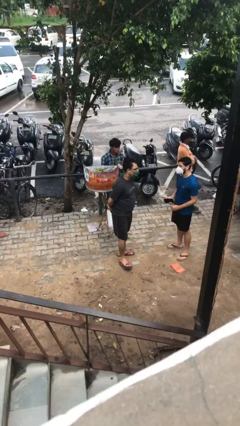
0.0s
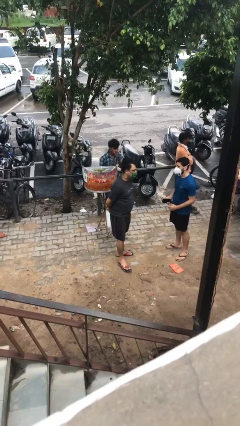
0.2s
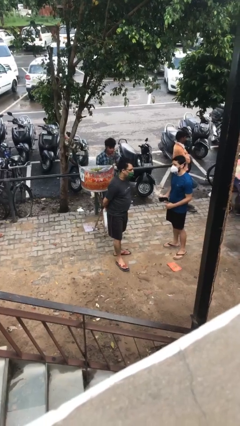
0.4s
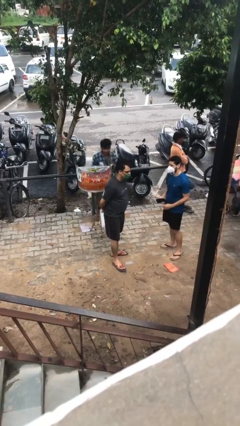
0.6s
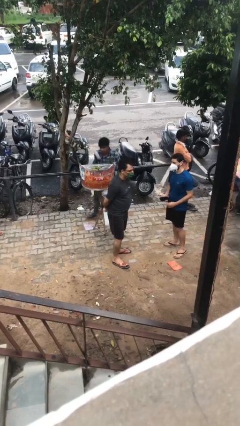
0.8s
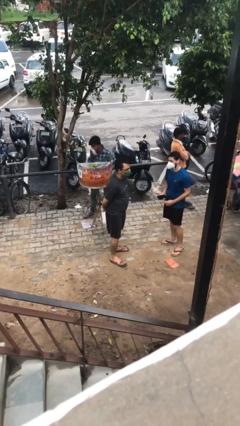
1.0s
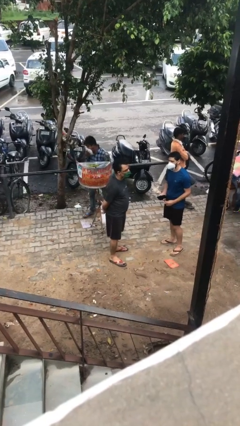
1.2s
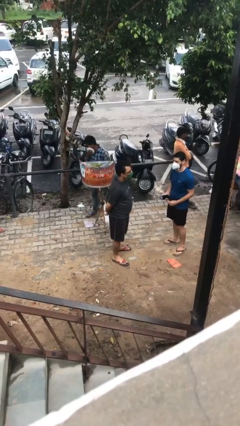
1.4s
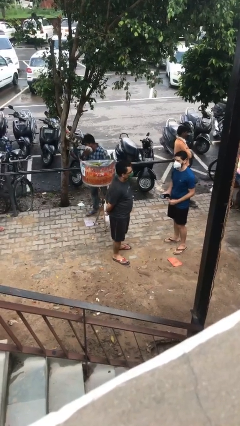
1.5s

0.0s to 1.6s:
person talks to person

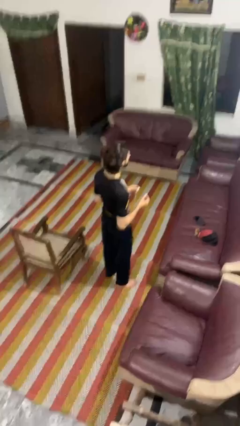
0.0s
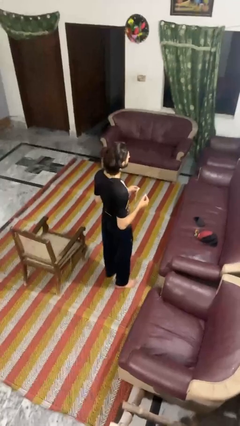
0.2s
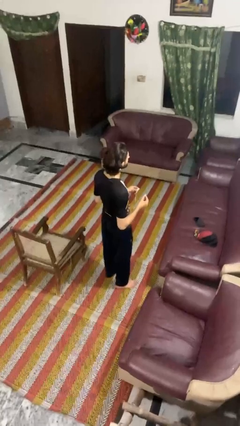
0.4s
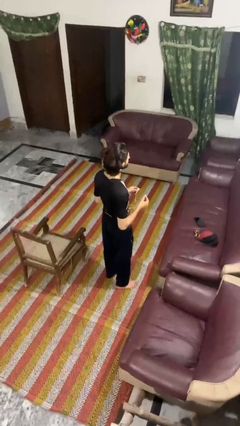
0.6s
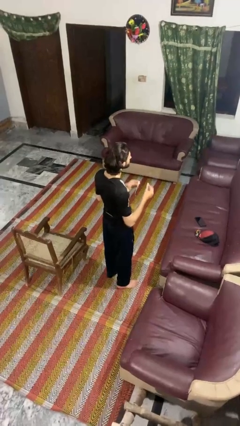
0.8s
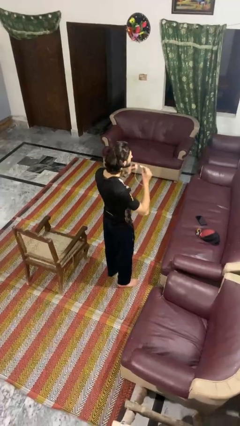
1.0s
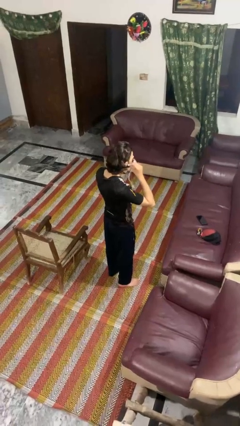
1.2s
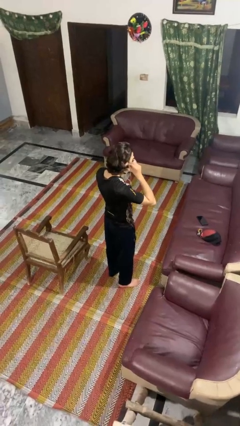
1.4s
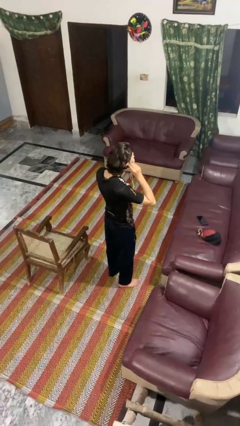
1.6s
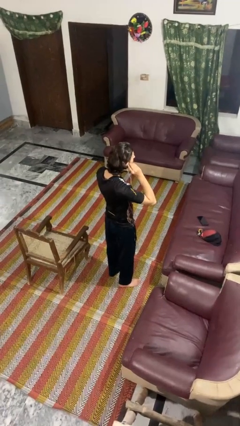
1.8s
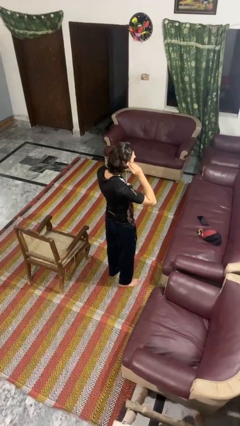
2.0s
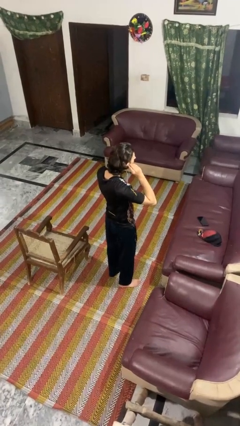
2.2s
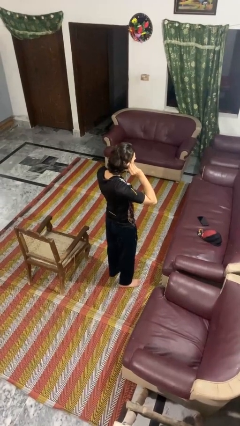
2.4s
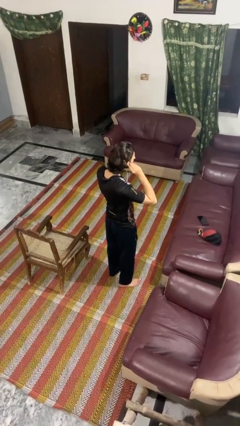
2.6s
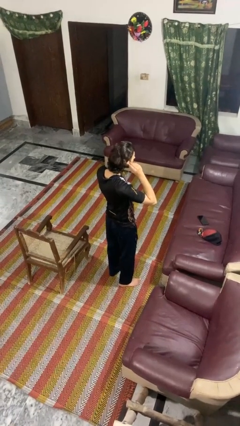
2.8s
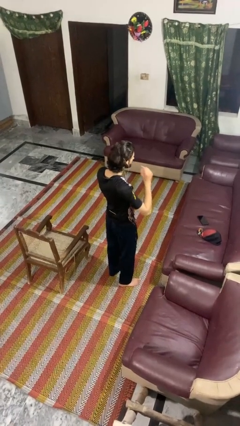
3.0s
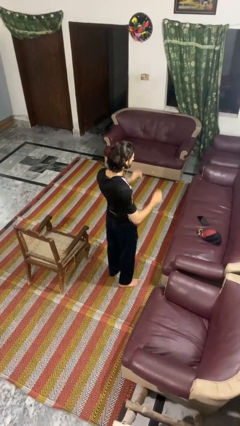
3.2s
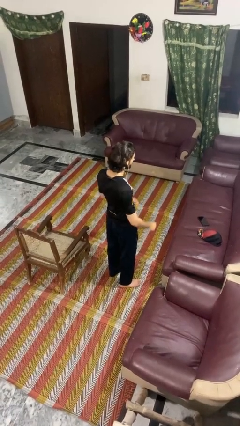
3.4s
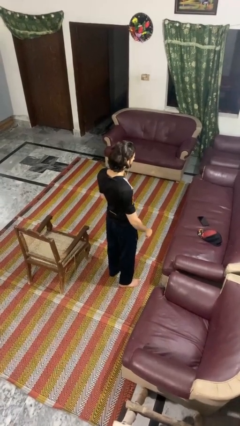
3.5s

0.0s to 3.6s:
person puts on headphones

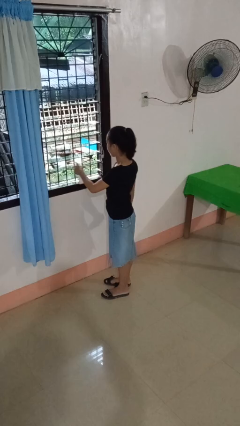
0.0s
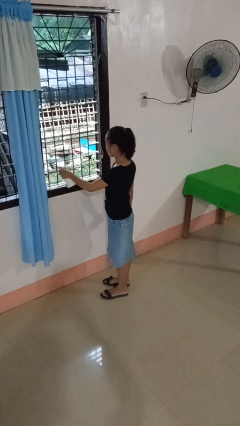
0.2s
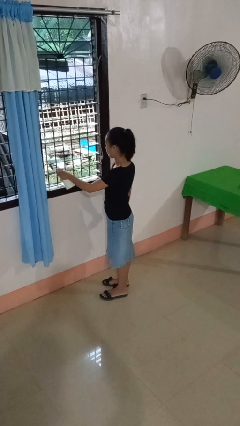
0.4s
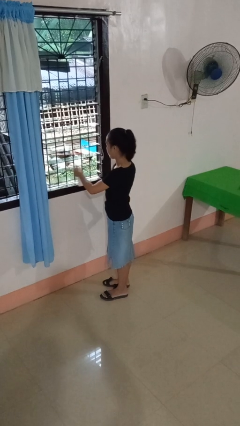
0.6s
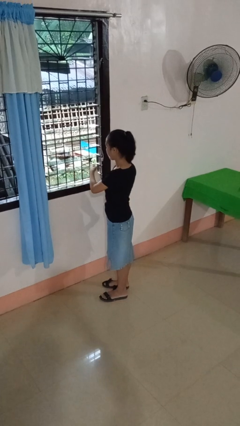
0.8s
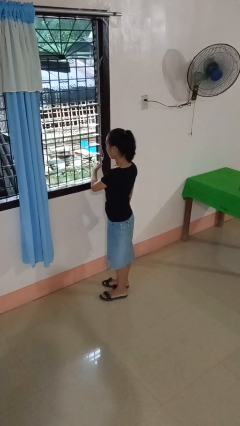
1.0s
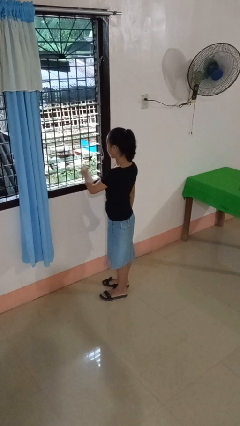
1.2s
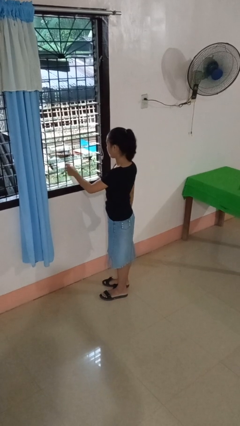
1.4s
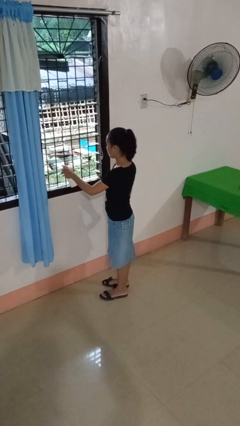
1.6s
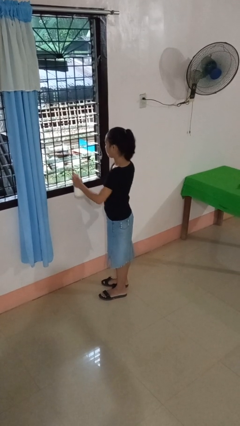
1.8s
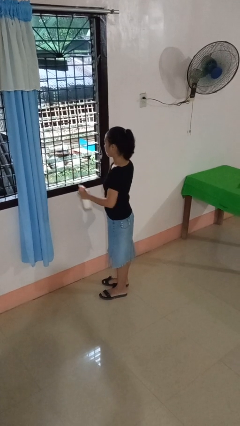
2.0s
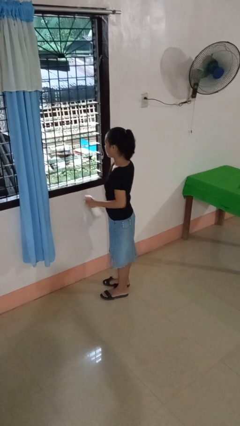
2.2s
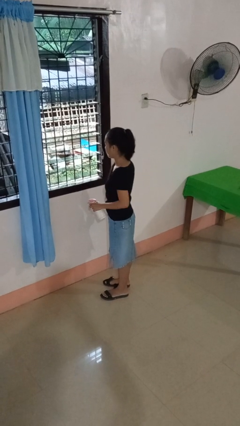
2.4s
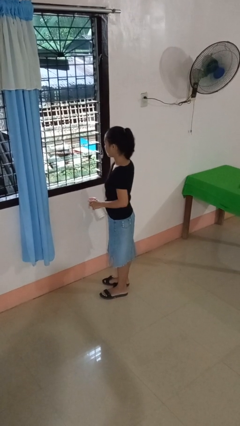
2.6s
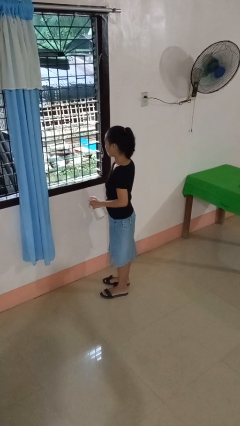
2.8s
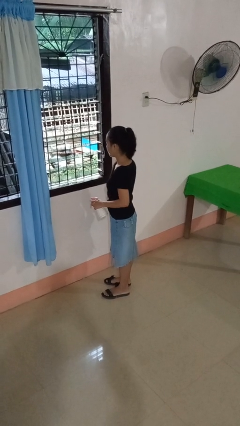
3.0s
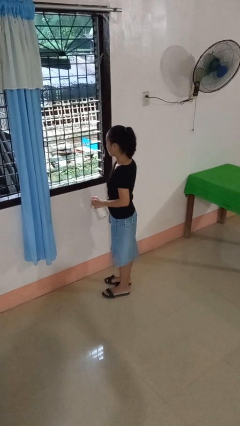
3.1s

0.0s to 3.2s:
person sprays from bottle

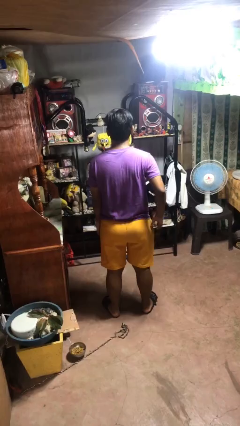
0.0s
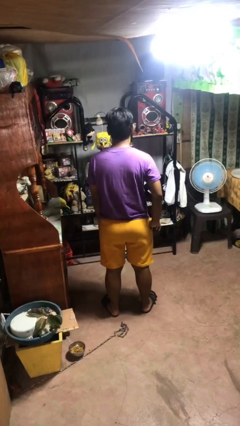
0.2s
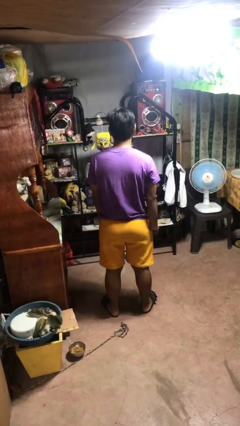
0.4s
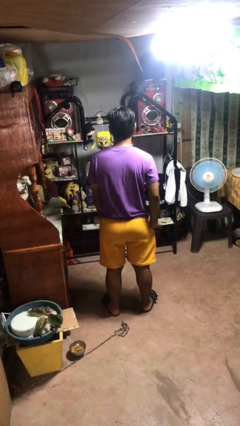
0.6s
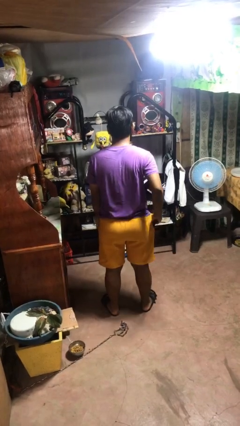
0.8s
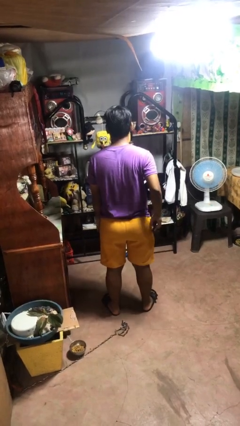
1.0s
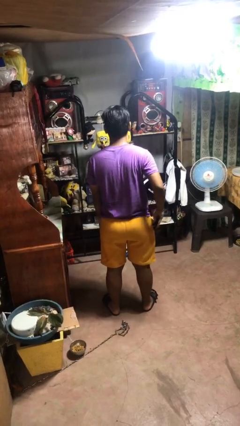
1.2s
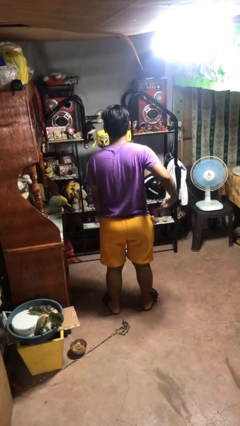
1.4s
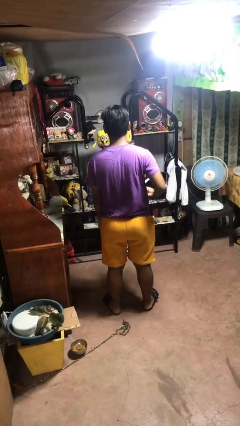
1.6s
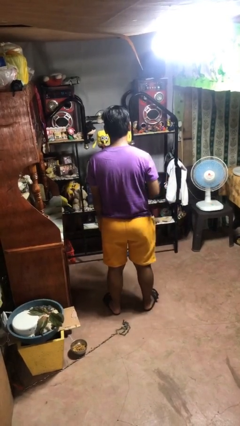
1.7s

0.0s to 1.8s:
person takes phone from pocket

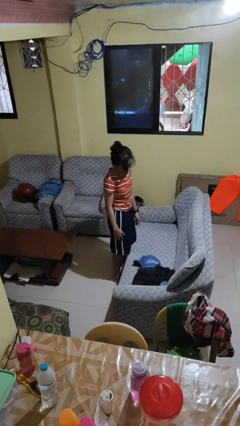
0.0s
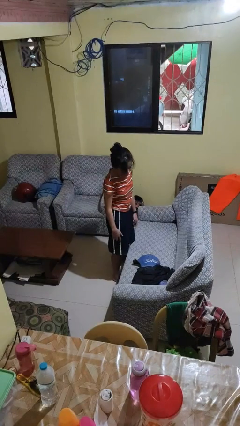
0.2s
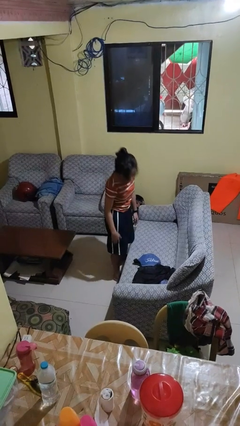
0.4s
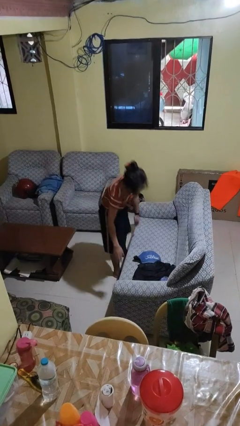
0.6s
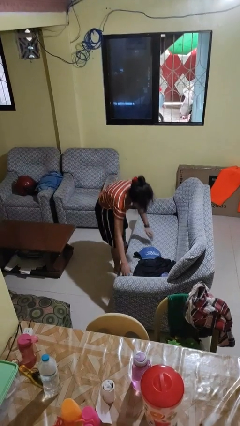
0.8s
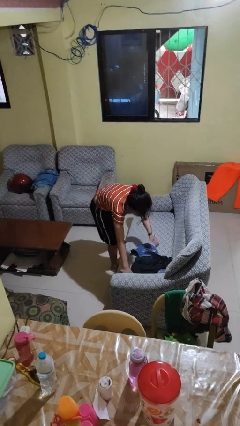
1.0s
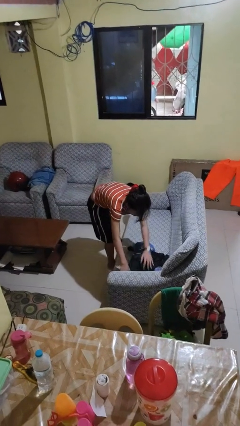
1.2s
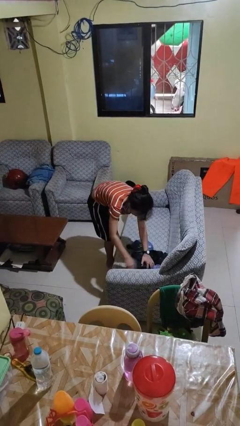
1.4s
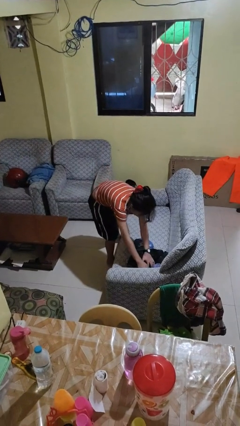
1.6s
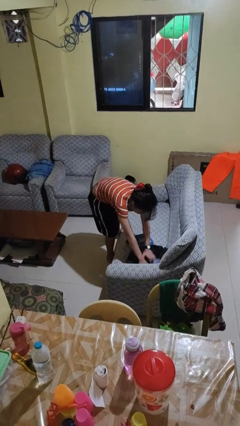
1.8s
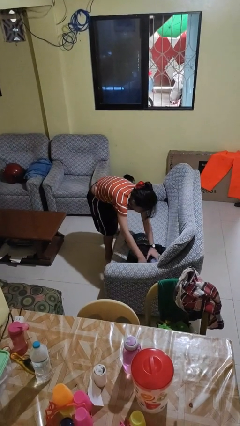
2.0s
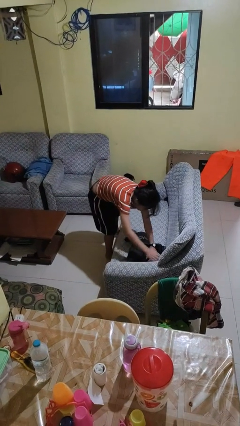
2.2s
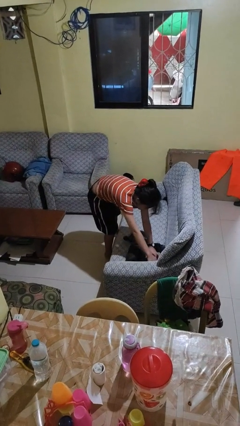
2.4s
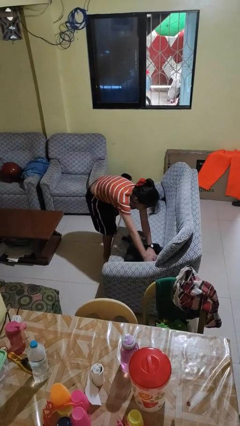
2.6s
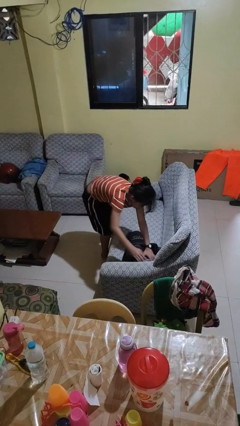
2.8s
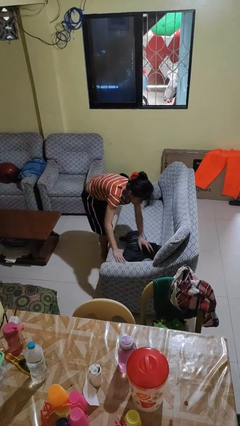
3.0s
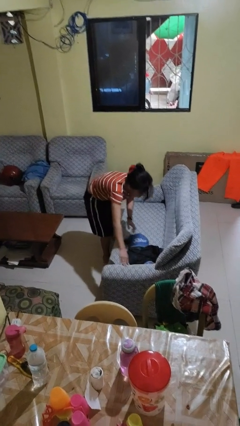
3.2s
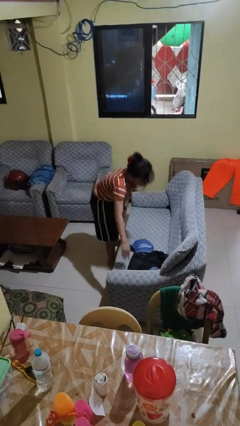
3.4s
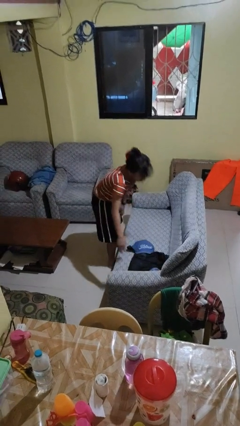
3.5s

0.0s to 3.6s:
person searches in couch

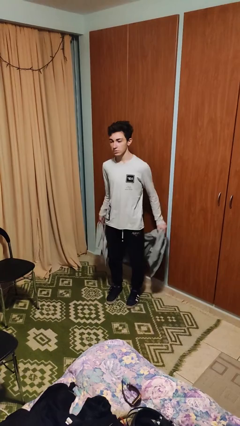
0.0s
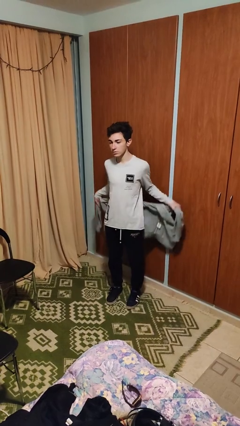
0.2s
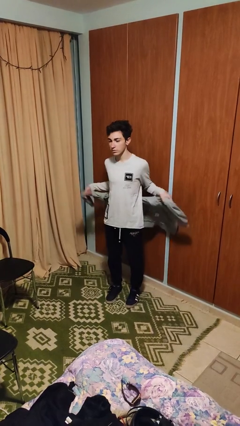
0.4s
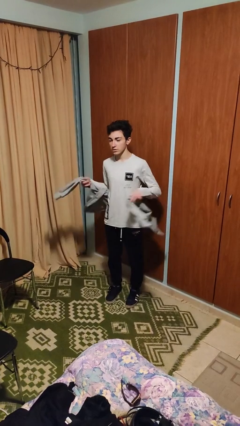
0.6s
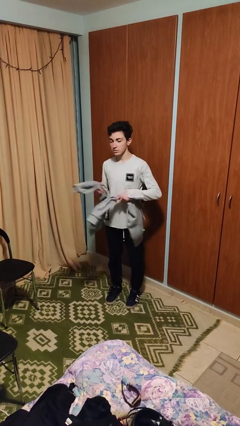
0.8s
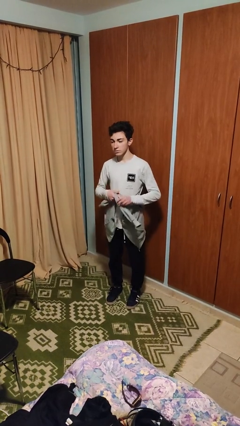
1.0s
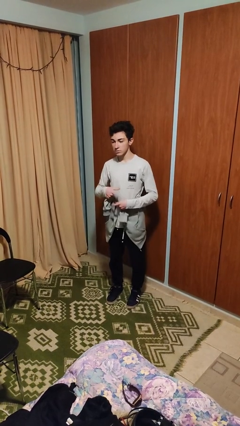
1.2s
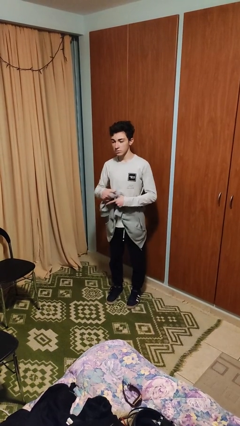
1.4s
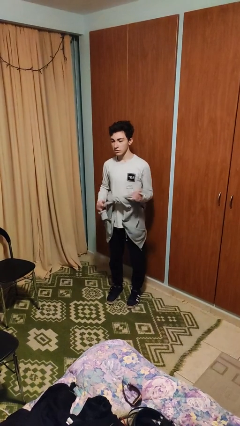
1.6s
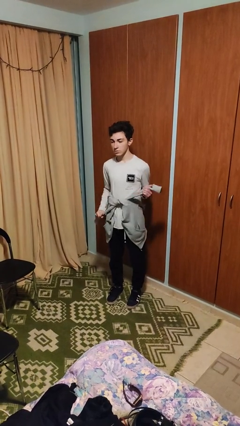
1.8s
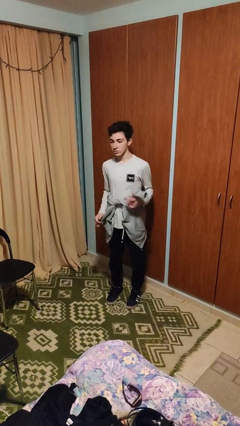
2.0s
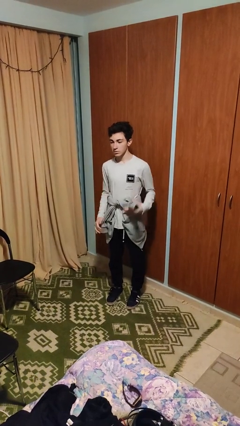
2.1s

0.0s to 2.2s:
person ties jacket around waist

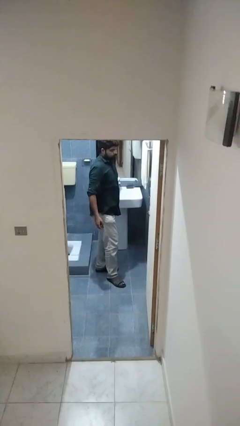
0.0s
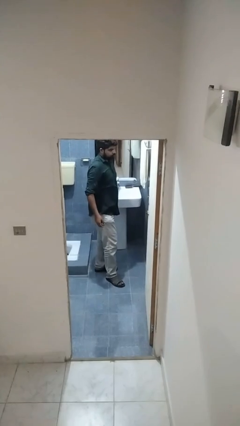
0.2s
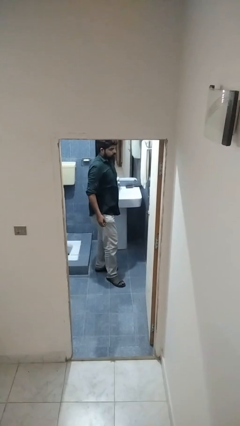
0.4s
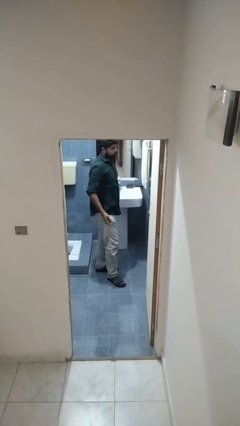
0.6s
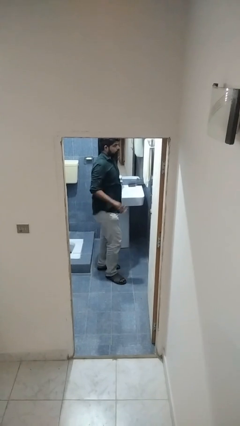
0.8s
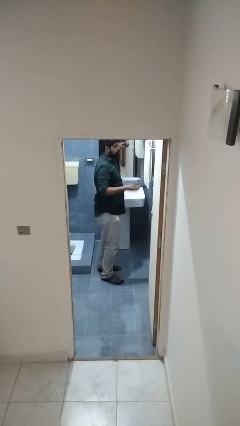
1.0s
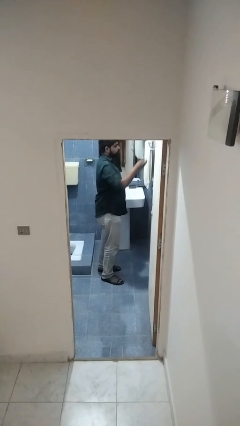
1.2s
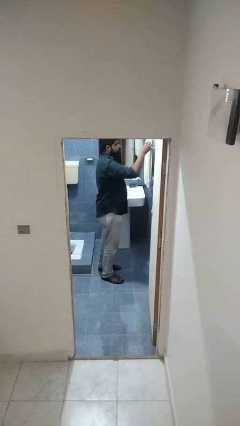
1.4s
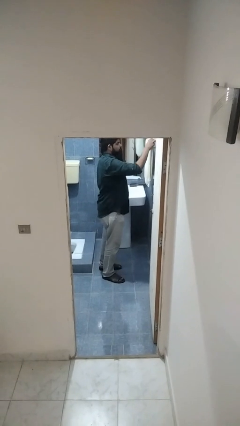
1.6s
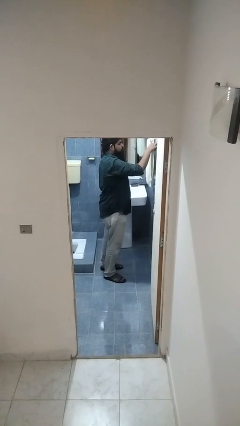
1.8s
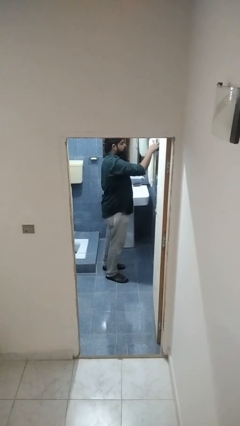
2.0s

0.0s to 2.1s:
person puts down object on countertop
